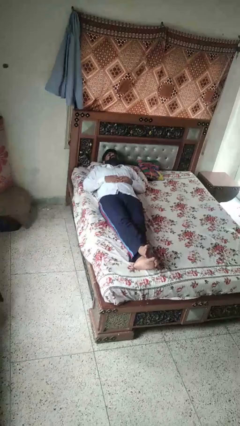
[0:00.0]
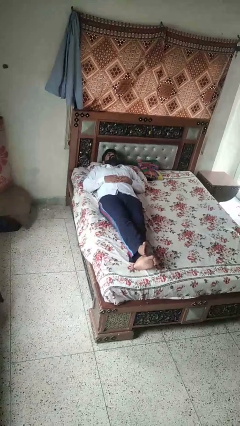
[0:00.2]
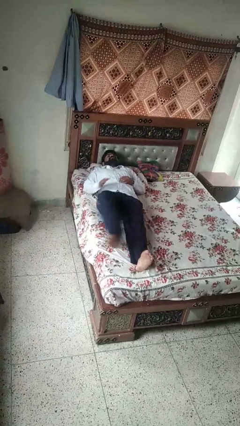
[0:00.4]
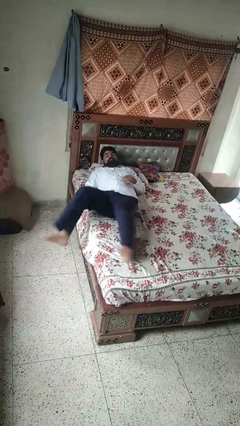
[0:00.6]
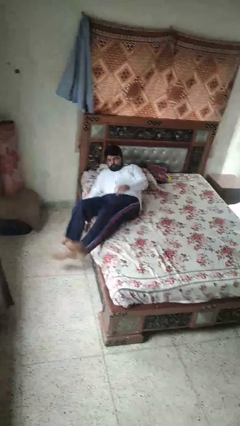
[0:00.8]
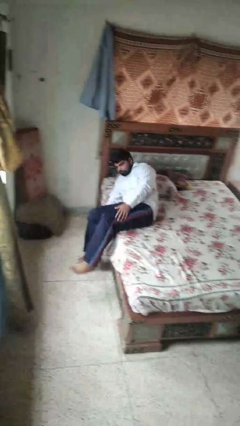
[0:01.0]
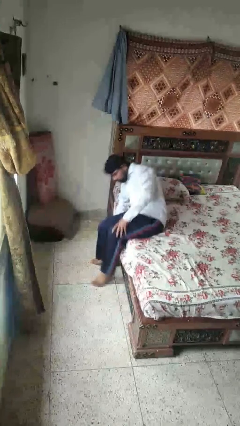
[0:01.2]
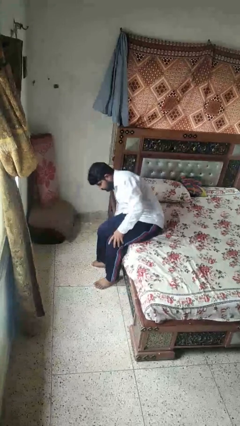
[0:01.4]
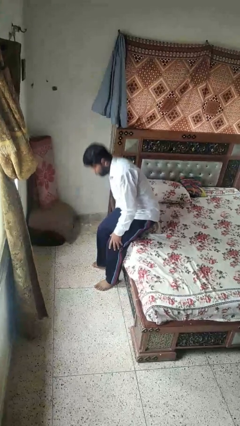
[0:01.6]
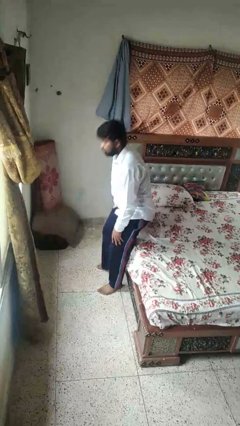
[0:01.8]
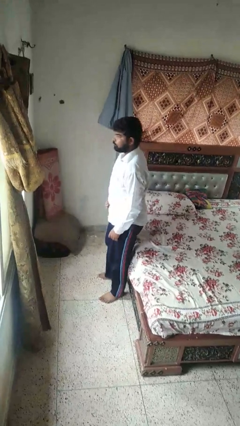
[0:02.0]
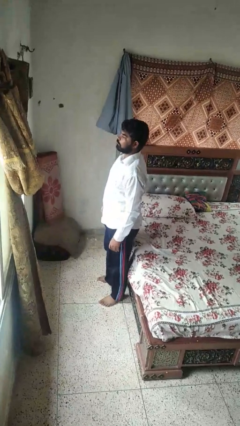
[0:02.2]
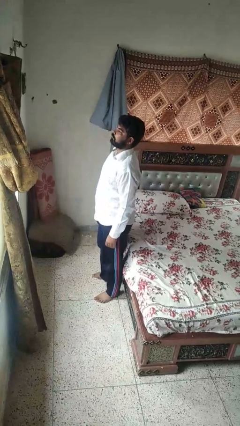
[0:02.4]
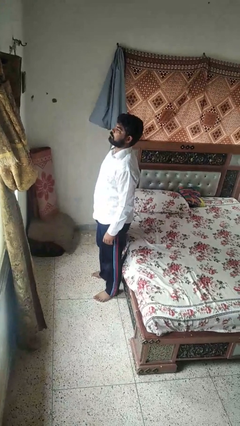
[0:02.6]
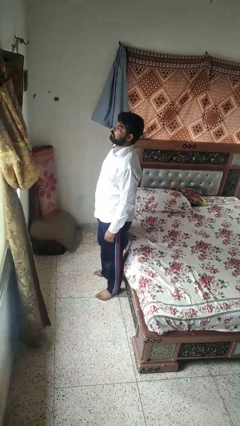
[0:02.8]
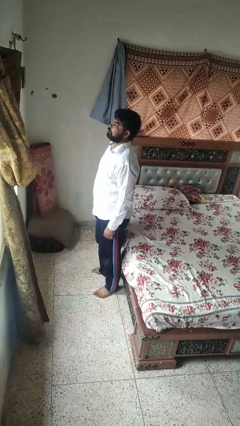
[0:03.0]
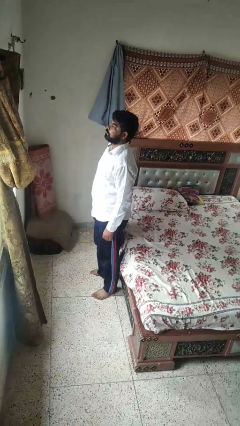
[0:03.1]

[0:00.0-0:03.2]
person stands up

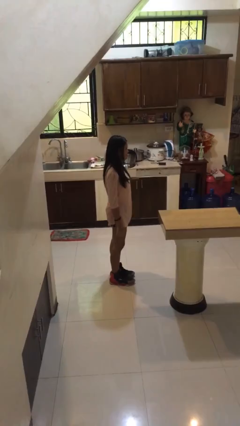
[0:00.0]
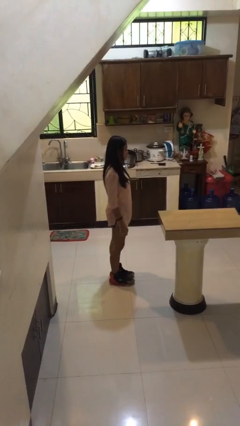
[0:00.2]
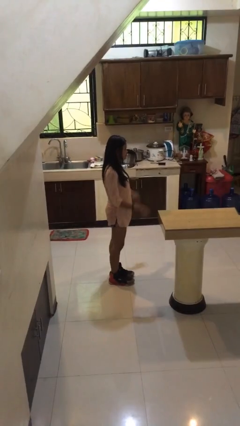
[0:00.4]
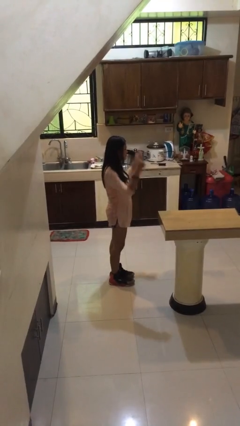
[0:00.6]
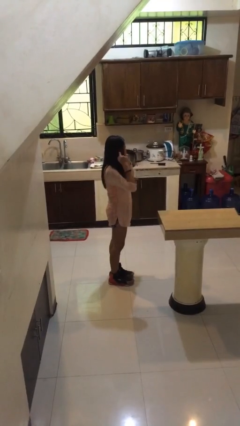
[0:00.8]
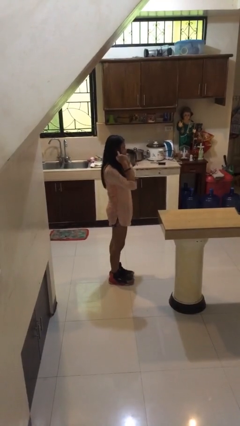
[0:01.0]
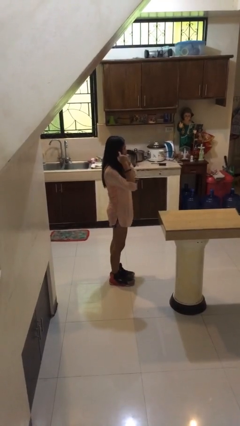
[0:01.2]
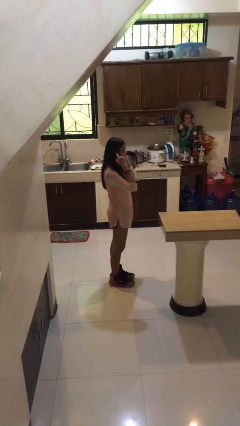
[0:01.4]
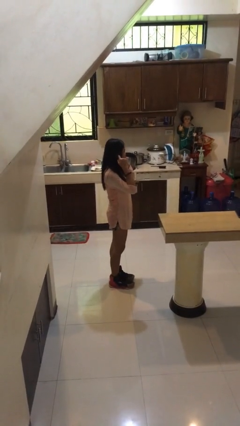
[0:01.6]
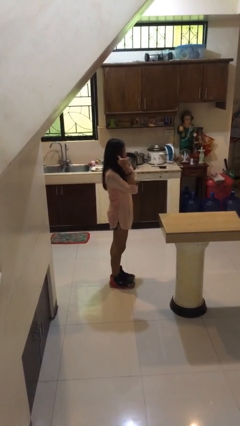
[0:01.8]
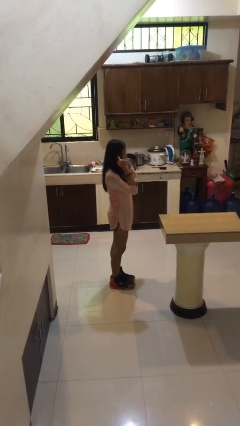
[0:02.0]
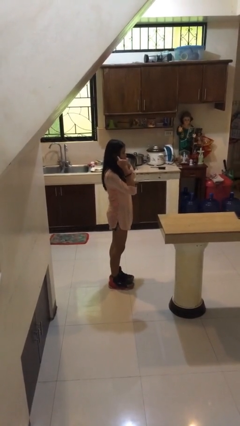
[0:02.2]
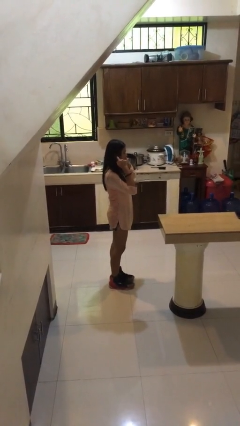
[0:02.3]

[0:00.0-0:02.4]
person puts fingers in ear

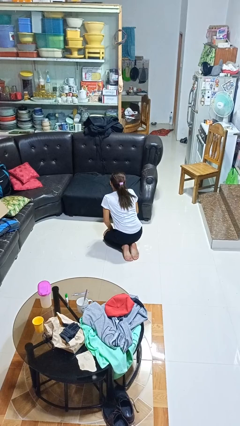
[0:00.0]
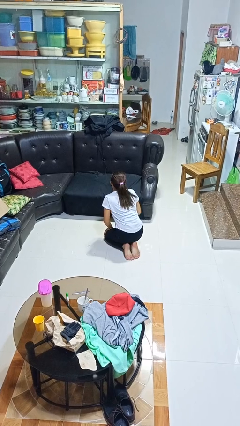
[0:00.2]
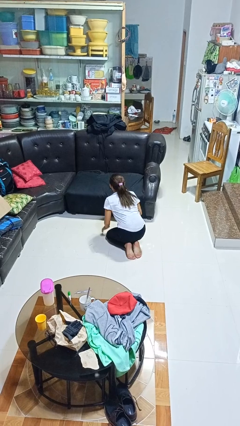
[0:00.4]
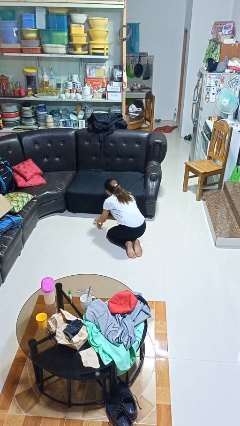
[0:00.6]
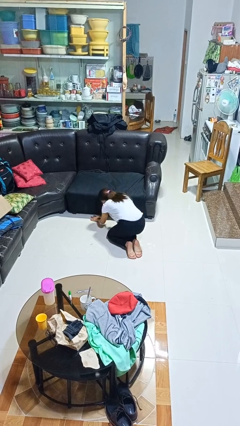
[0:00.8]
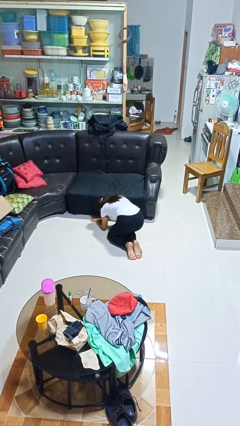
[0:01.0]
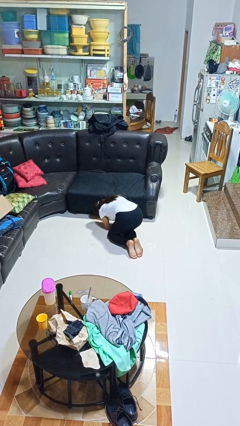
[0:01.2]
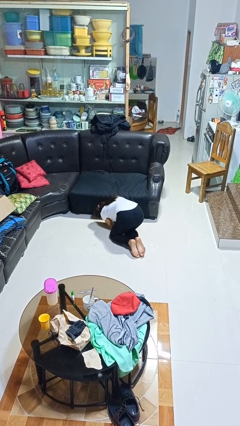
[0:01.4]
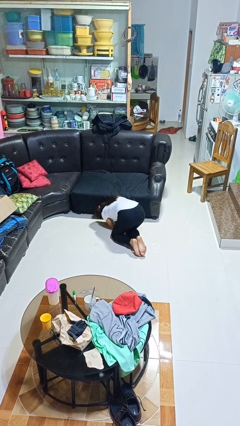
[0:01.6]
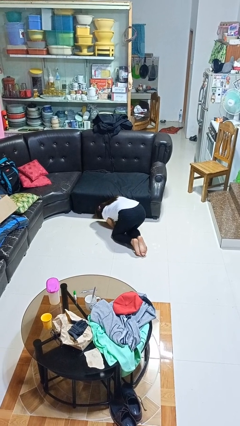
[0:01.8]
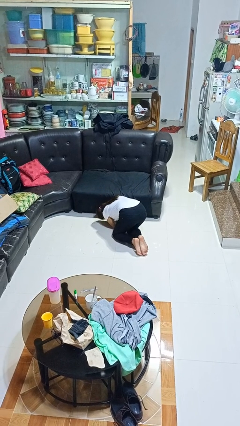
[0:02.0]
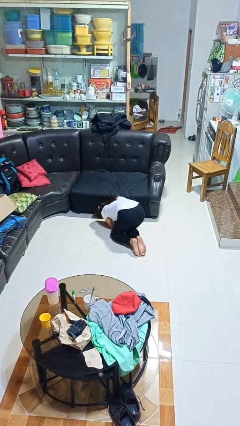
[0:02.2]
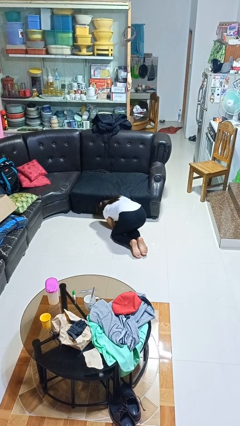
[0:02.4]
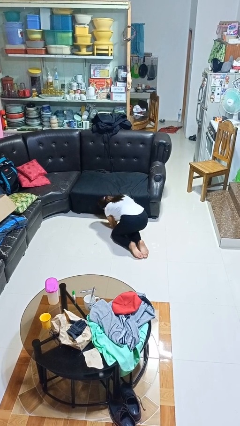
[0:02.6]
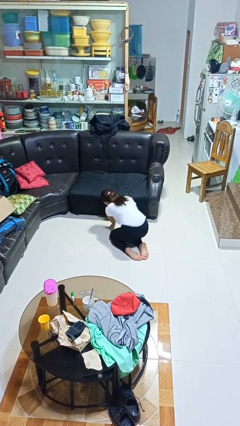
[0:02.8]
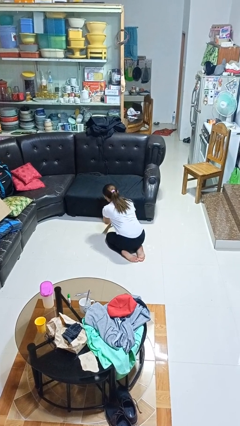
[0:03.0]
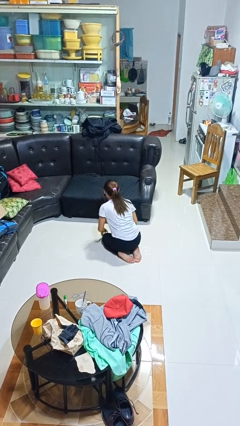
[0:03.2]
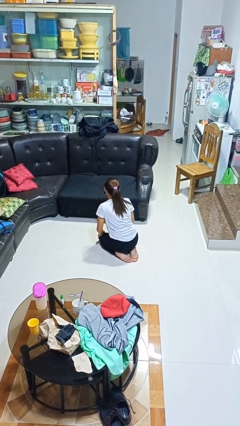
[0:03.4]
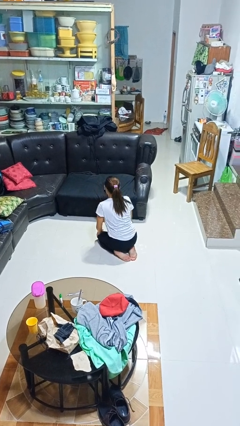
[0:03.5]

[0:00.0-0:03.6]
person searches under couch

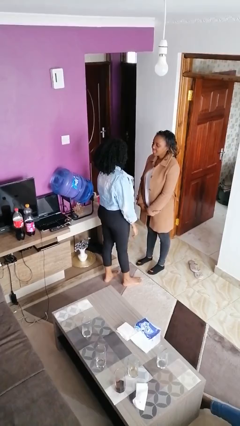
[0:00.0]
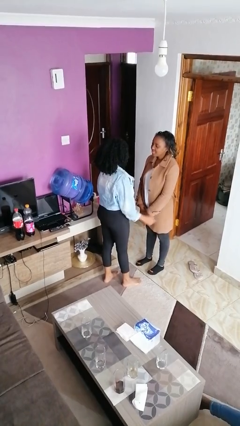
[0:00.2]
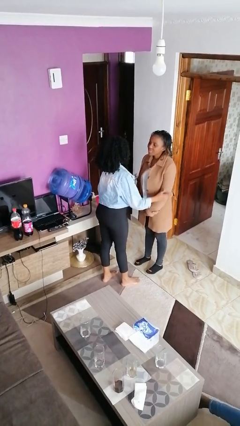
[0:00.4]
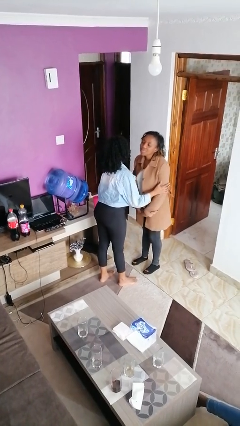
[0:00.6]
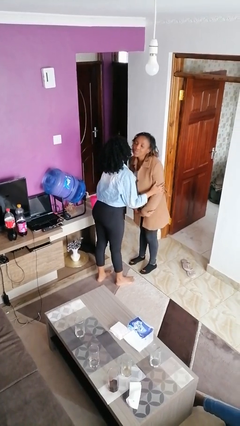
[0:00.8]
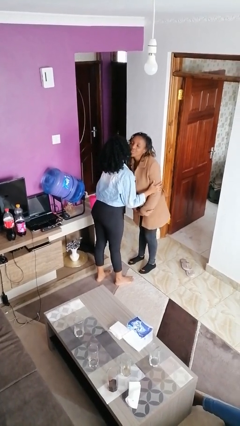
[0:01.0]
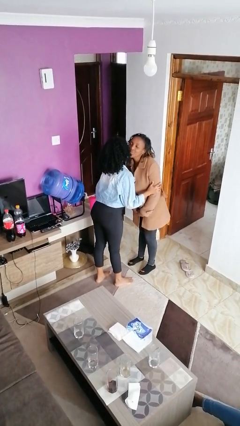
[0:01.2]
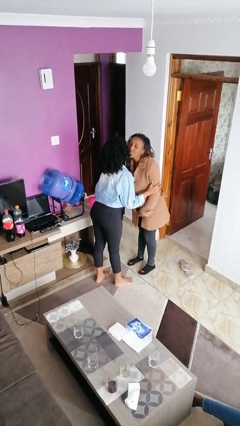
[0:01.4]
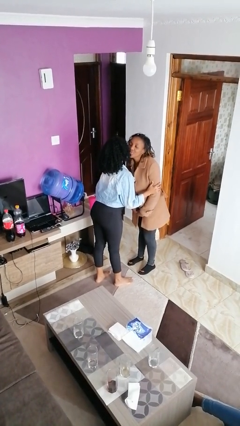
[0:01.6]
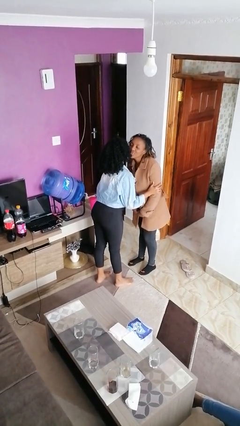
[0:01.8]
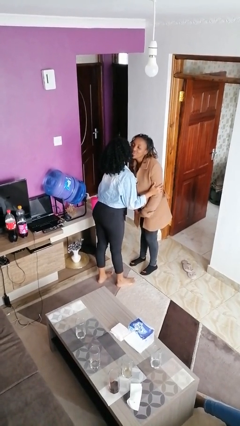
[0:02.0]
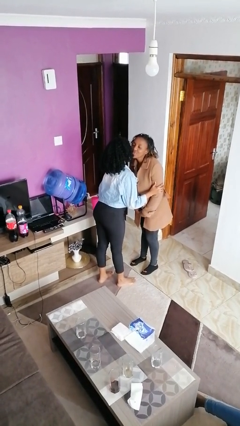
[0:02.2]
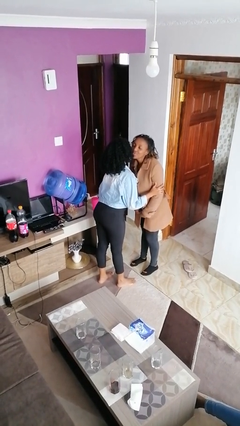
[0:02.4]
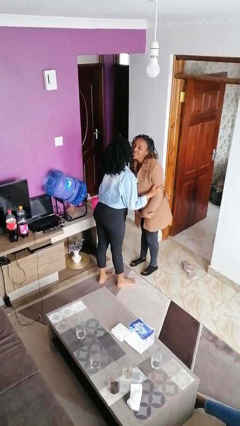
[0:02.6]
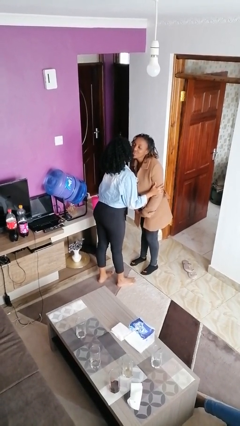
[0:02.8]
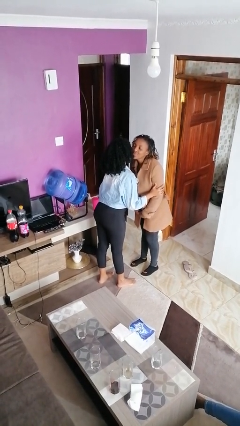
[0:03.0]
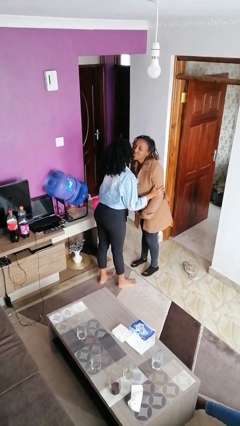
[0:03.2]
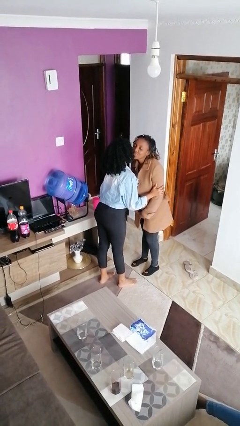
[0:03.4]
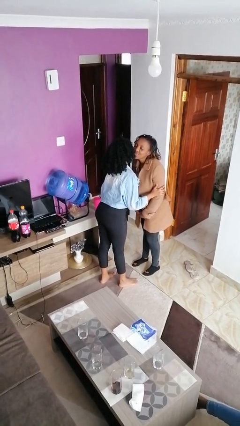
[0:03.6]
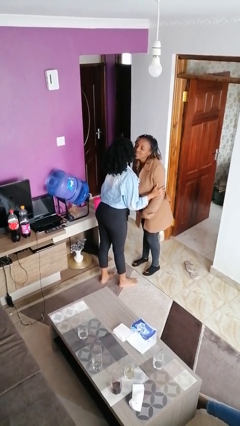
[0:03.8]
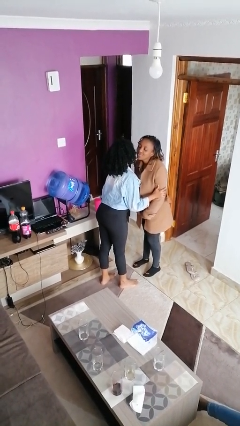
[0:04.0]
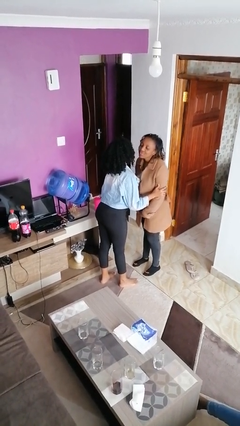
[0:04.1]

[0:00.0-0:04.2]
person kisses cheek of person

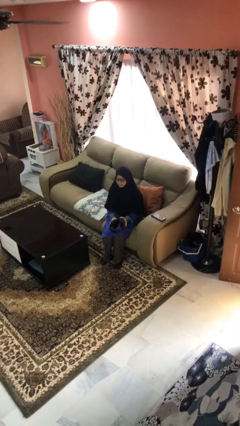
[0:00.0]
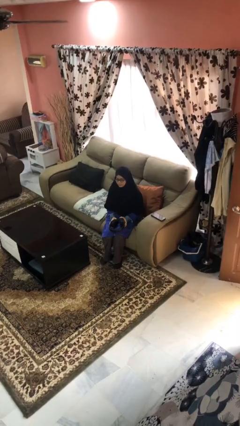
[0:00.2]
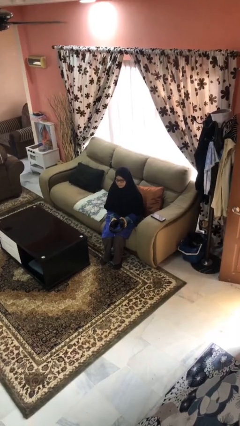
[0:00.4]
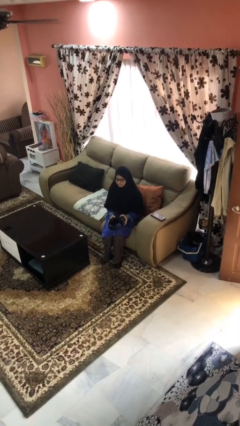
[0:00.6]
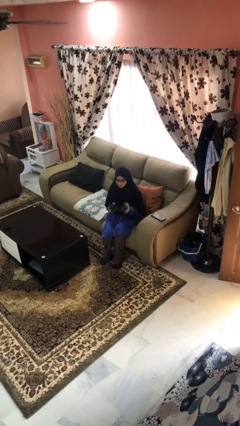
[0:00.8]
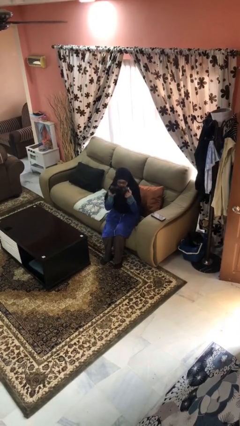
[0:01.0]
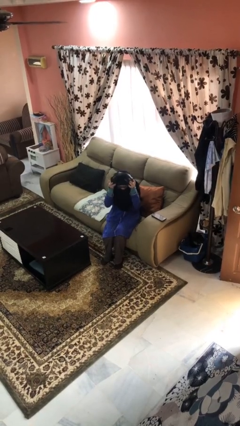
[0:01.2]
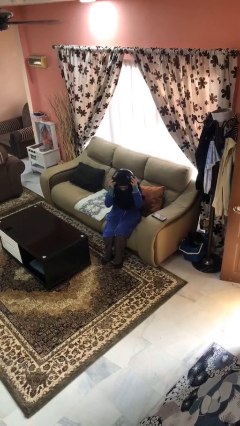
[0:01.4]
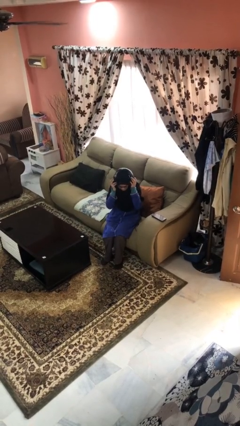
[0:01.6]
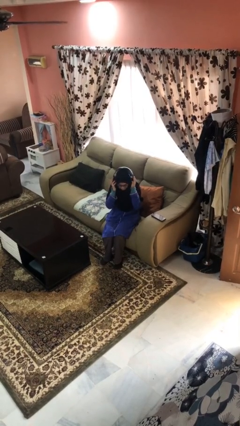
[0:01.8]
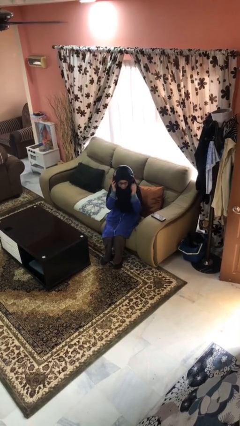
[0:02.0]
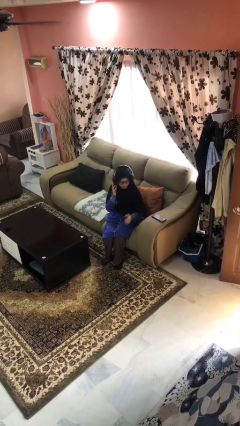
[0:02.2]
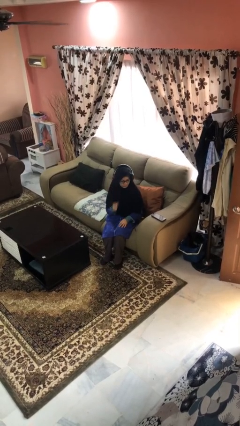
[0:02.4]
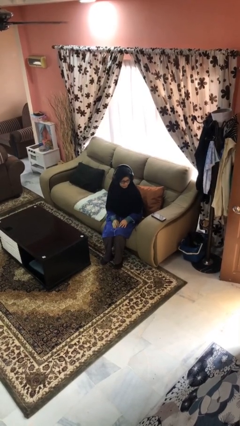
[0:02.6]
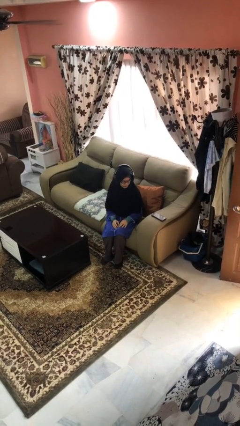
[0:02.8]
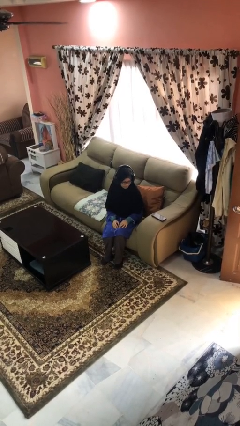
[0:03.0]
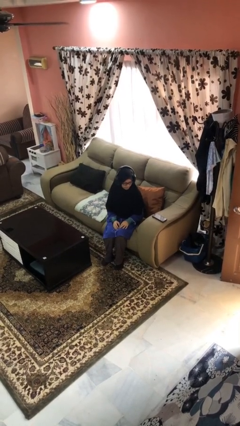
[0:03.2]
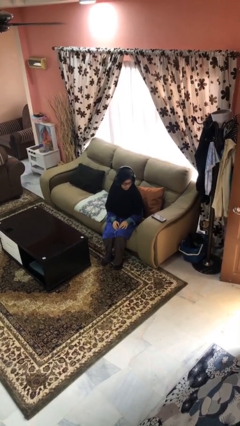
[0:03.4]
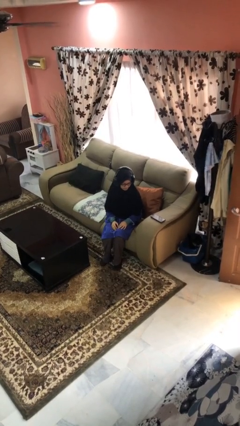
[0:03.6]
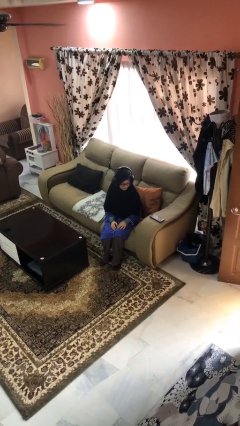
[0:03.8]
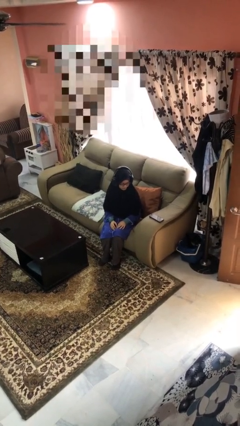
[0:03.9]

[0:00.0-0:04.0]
person puts on headphones

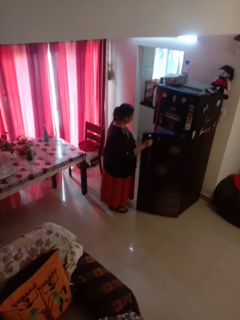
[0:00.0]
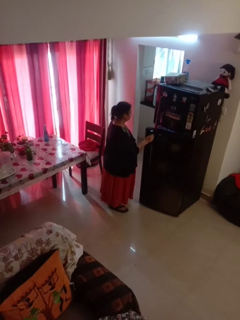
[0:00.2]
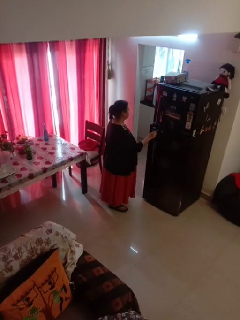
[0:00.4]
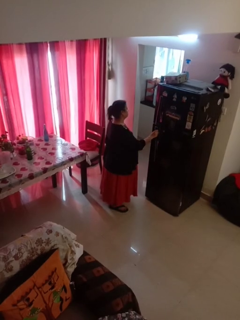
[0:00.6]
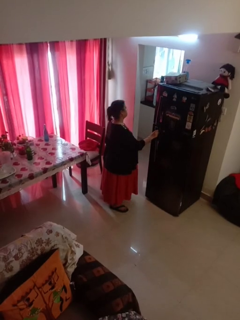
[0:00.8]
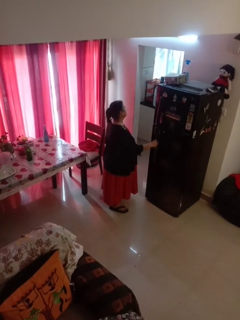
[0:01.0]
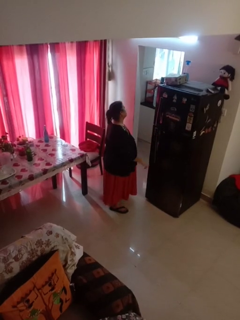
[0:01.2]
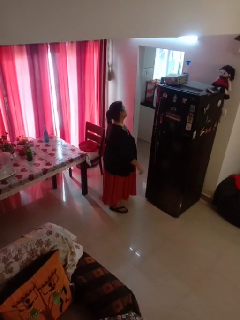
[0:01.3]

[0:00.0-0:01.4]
person closes refrigerator
